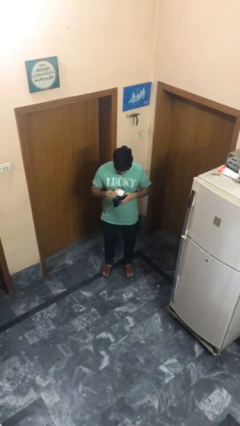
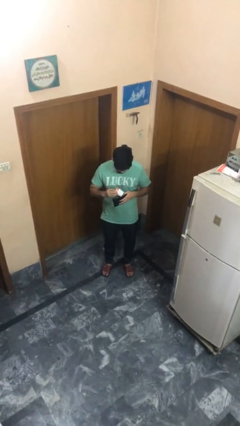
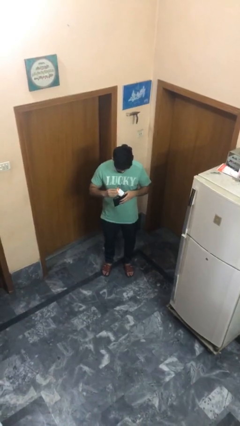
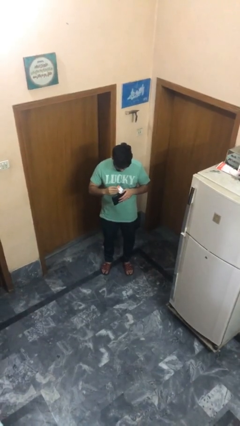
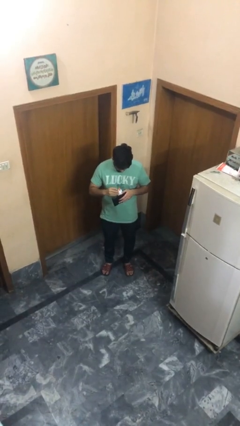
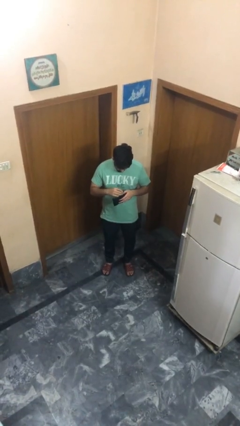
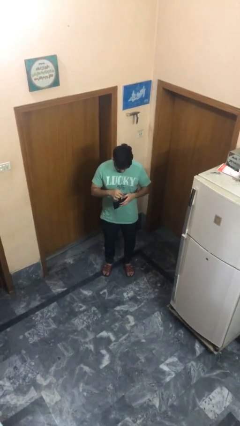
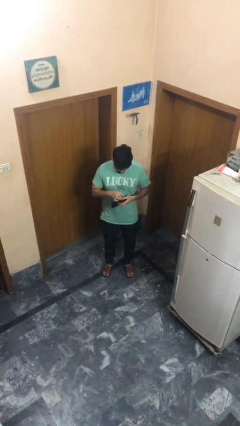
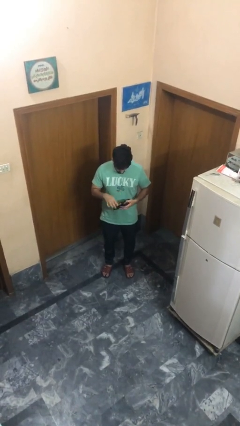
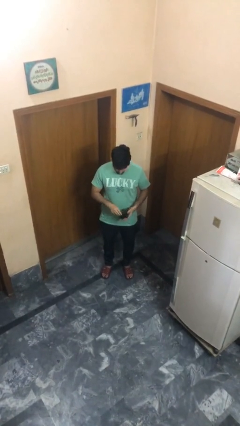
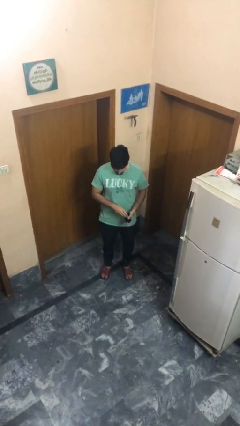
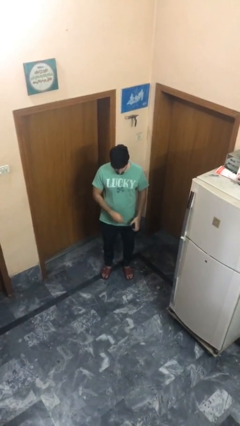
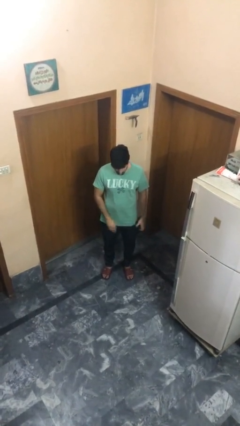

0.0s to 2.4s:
person puts object into purse

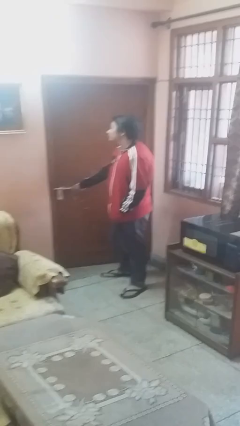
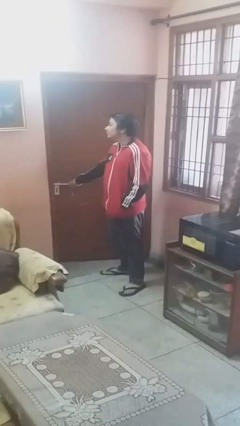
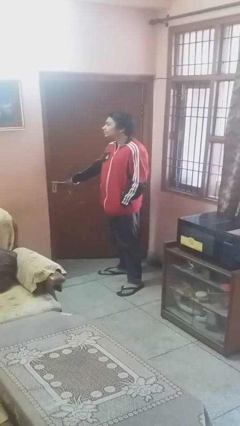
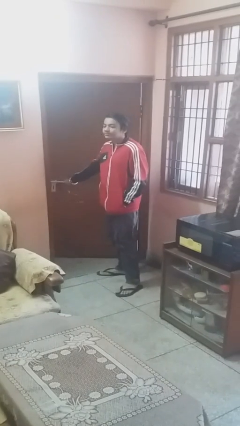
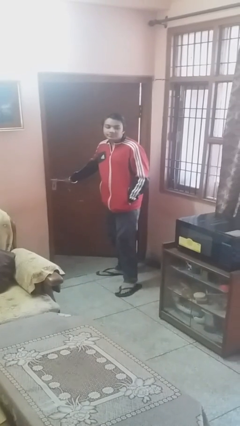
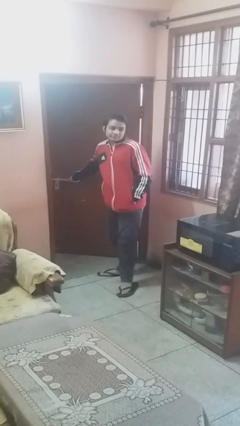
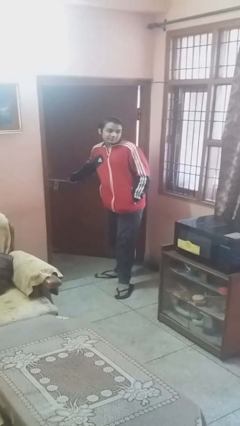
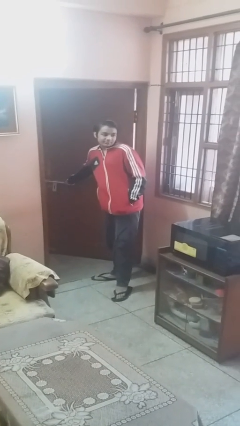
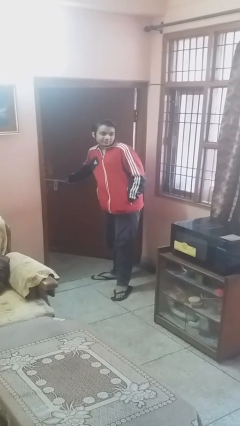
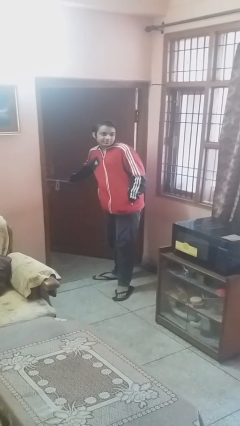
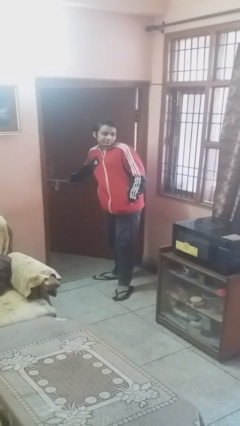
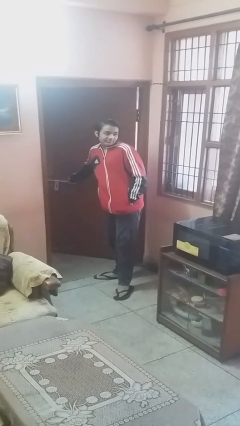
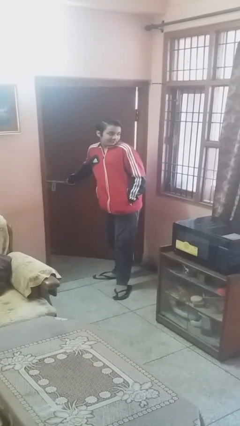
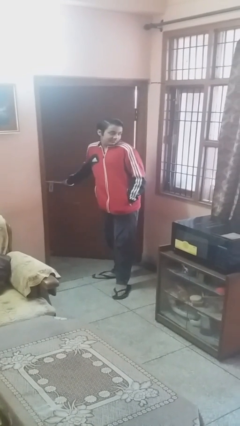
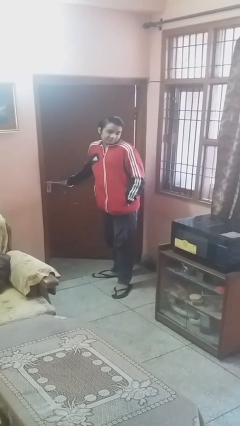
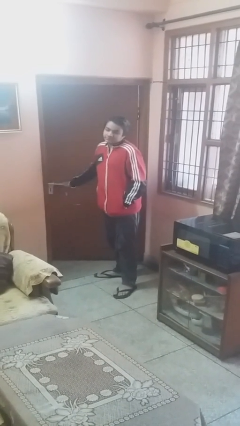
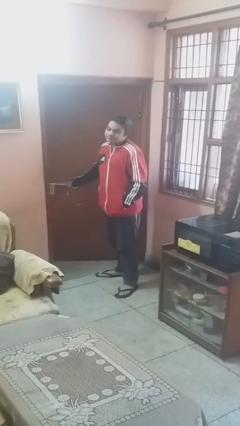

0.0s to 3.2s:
person opens facility door

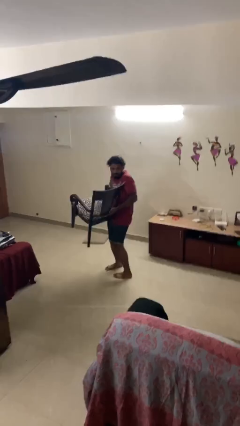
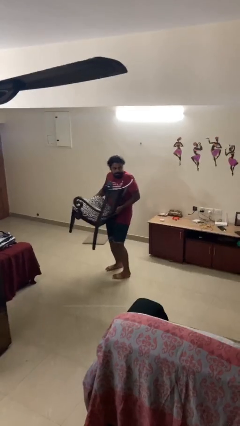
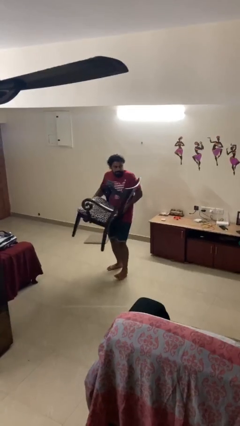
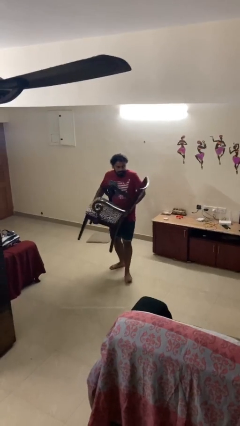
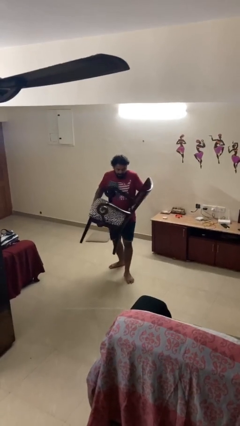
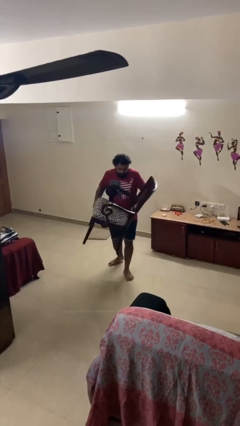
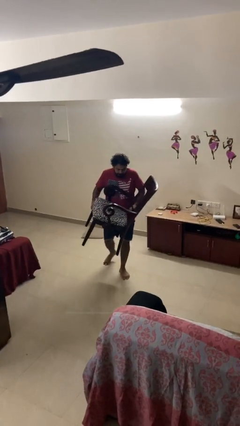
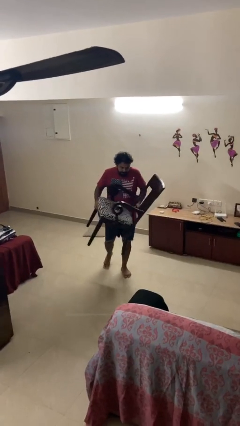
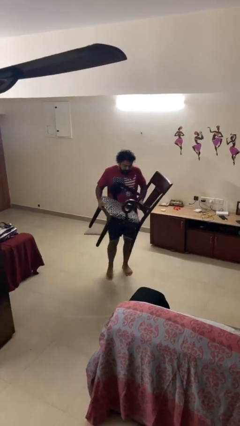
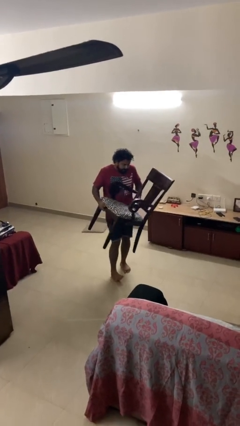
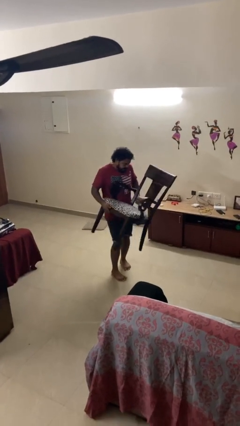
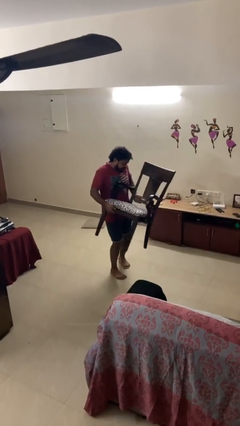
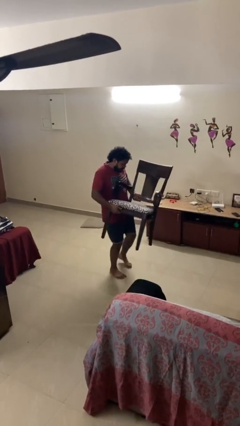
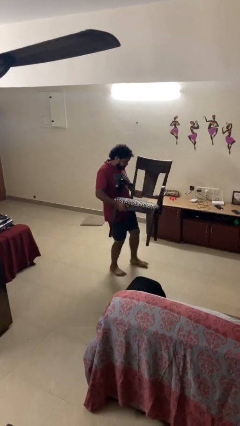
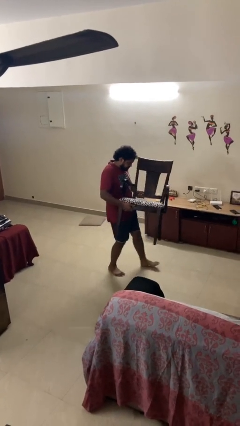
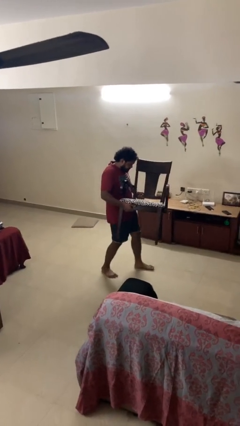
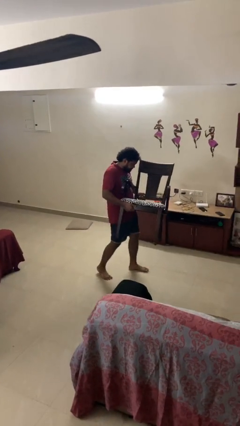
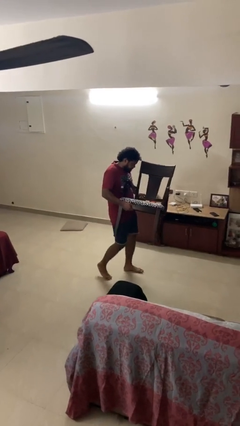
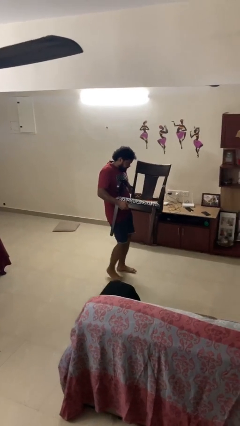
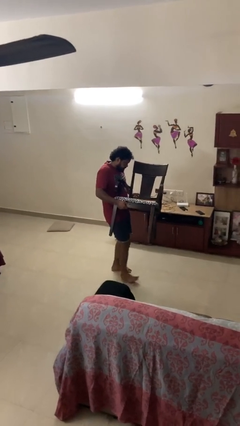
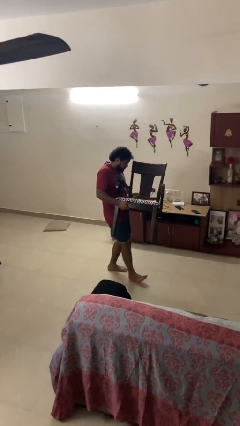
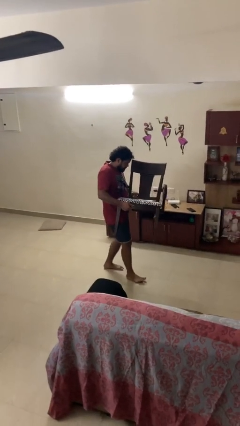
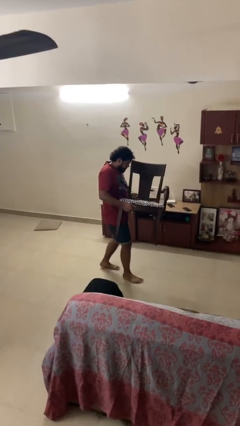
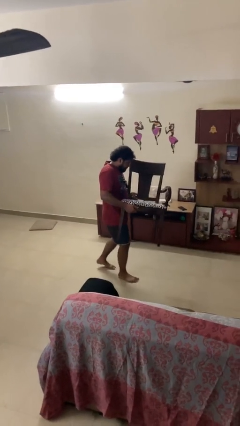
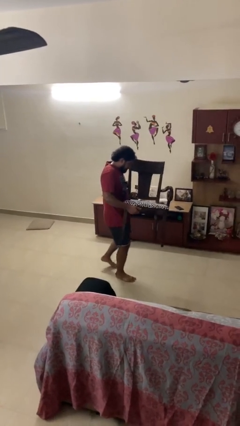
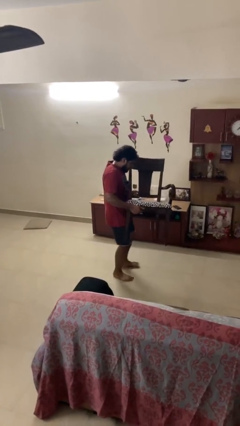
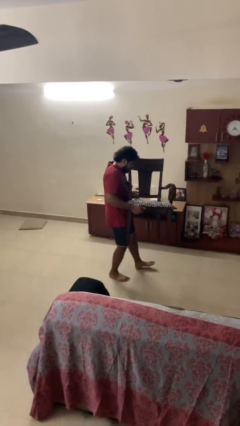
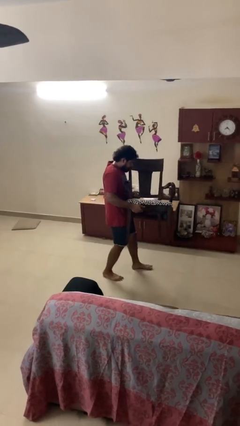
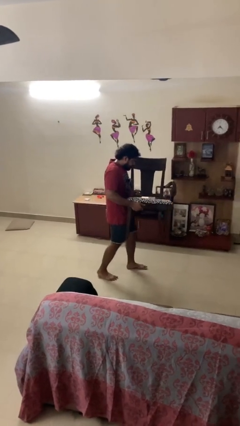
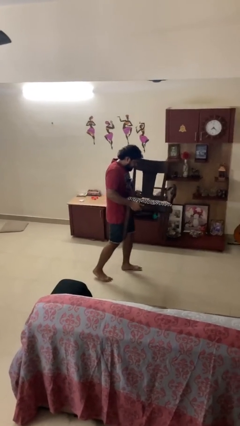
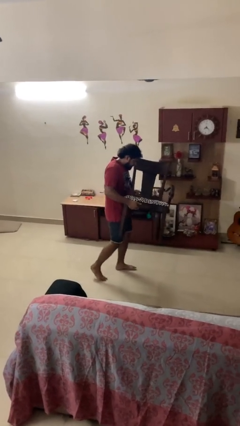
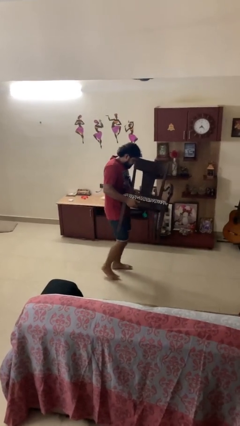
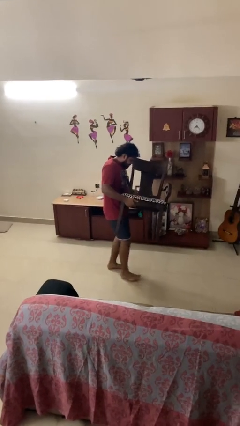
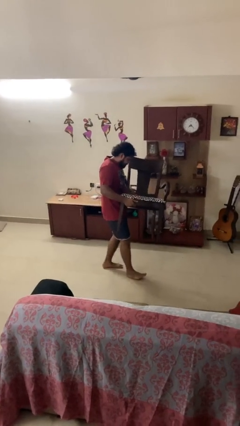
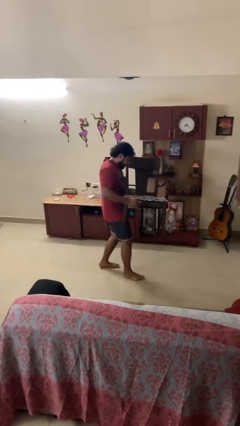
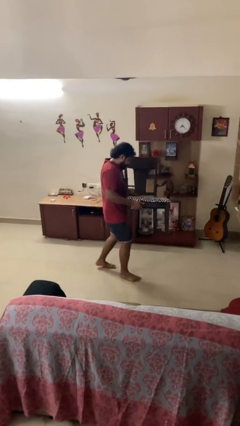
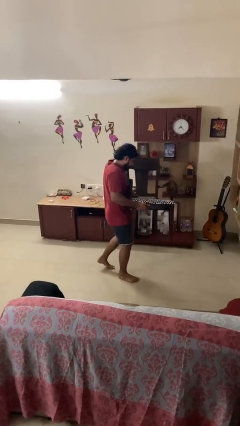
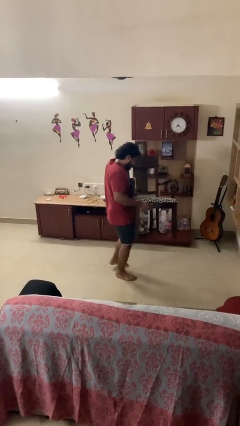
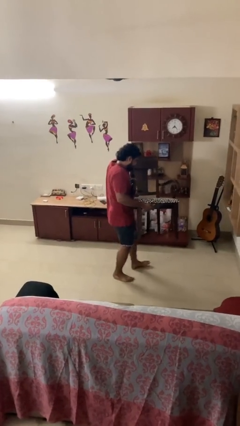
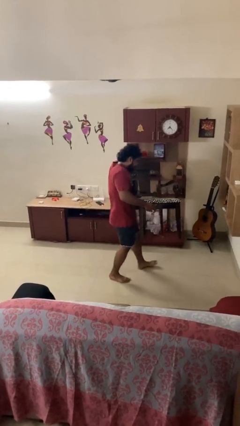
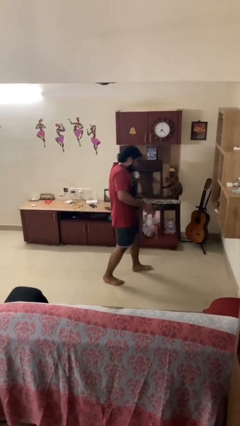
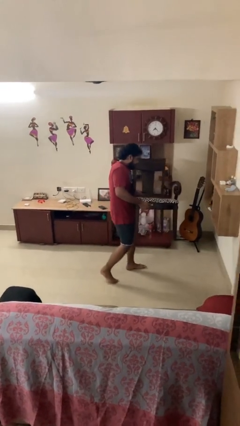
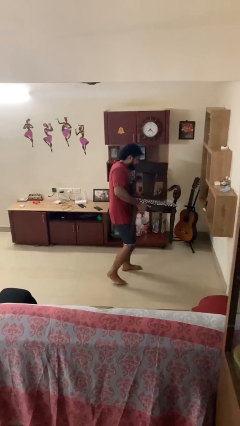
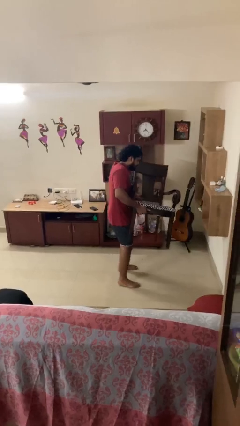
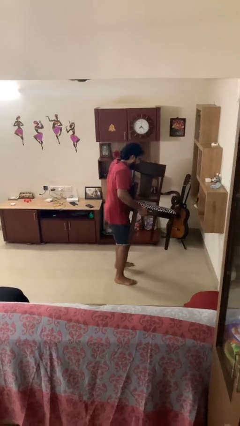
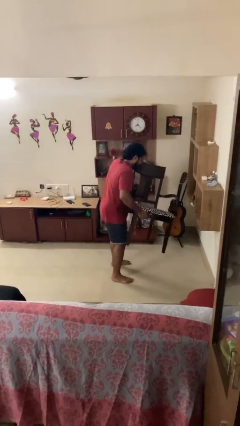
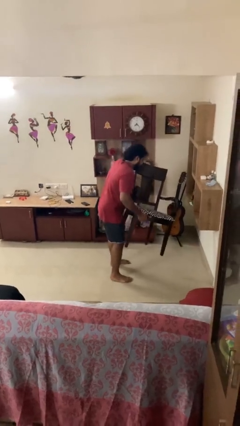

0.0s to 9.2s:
person carries heavy object

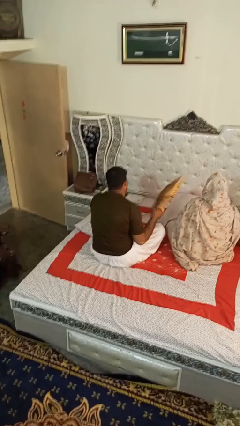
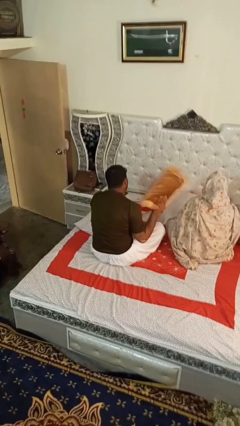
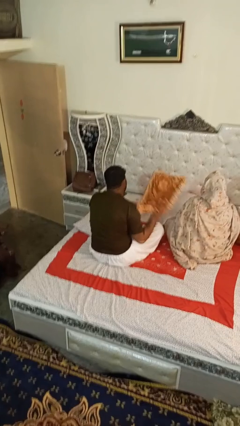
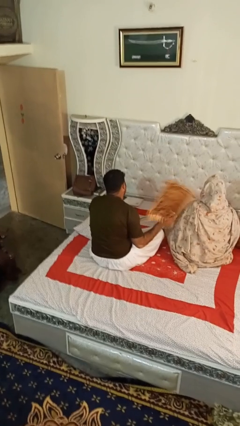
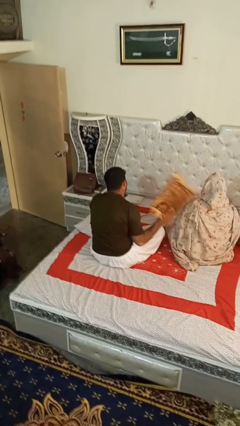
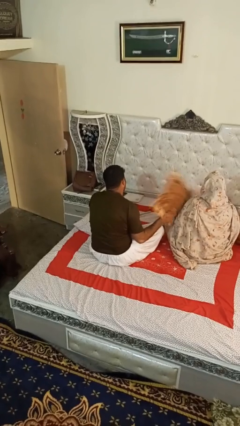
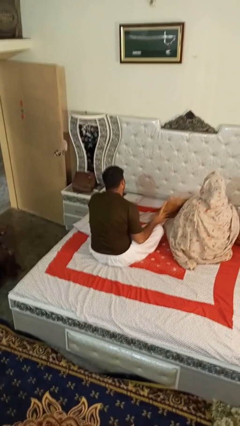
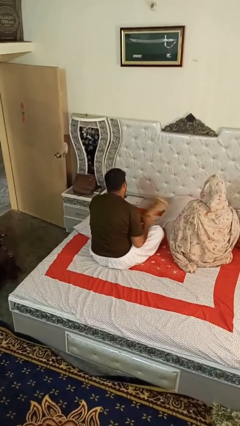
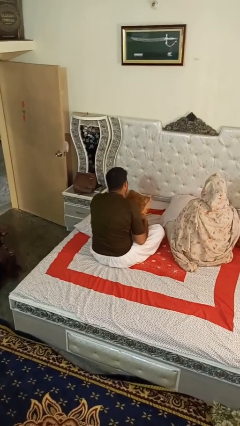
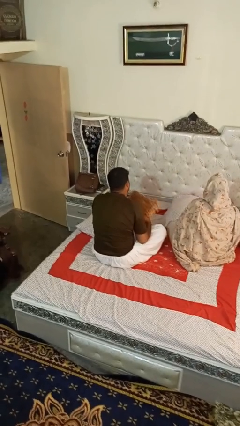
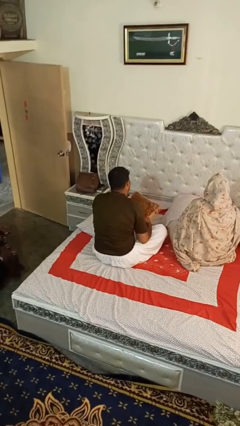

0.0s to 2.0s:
person hits person with pillow

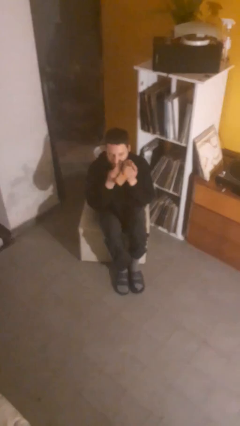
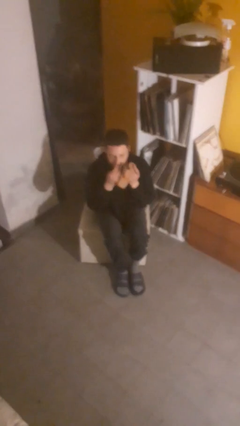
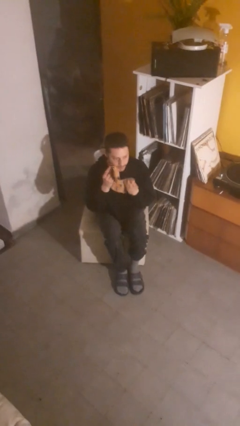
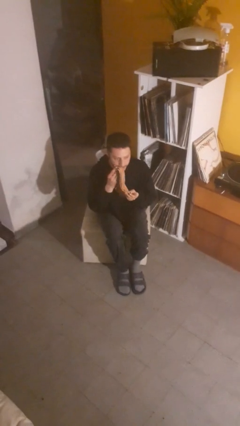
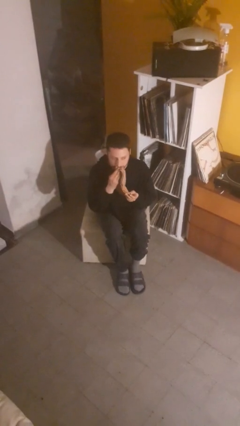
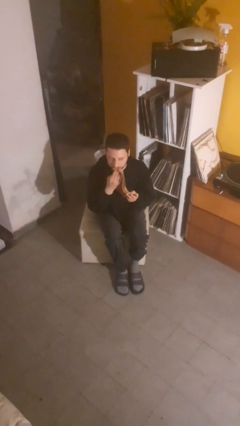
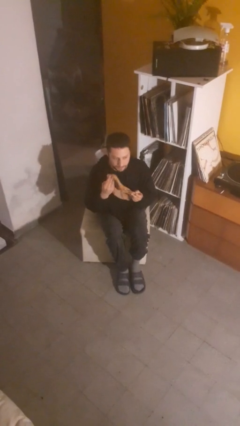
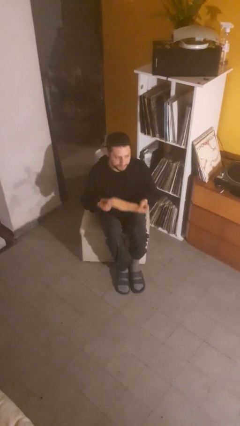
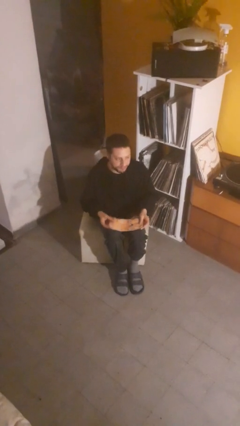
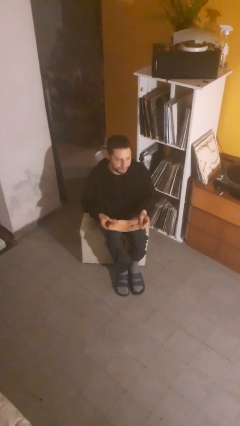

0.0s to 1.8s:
person wipes mouth with napkin
